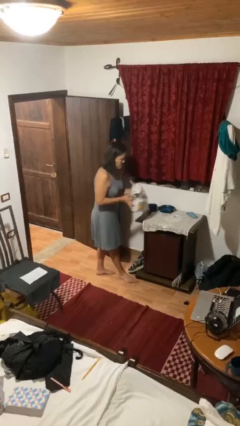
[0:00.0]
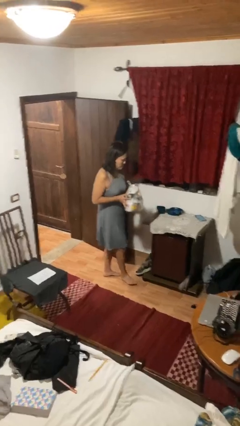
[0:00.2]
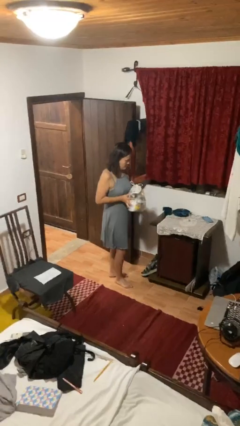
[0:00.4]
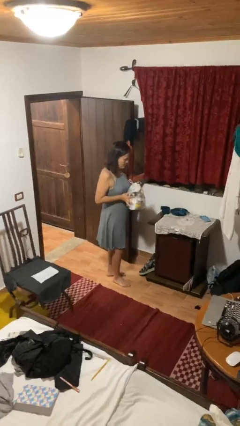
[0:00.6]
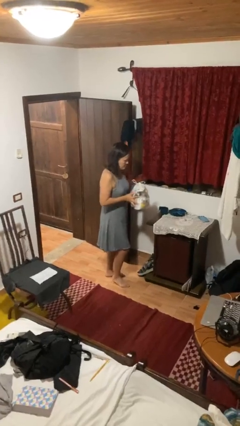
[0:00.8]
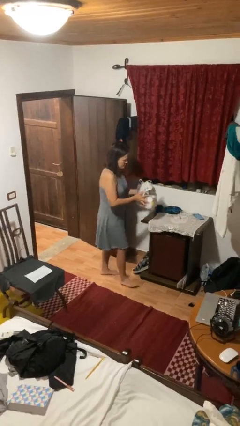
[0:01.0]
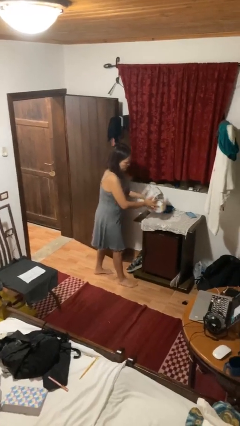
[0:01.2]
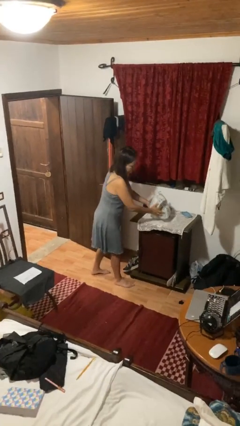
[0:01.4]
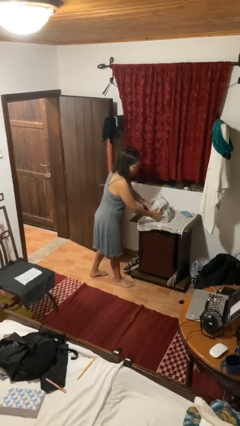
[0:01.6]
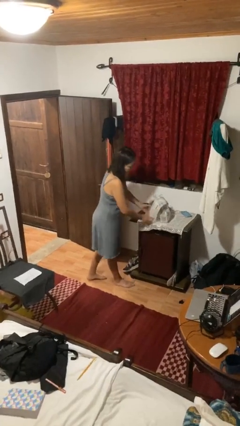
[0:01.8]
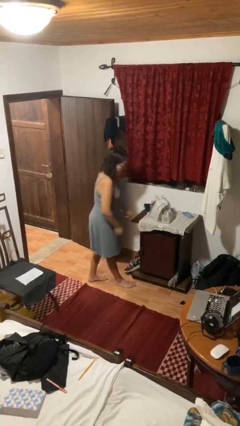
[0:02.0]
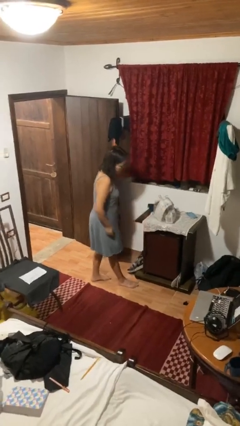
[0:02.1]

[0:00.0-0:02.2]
person puts down object on countertop

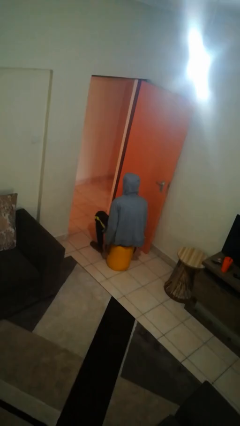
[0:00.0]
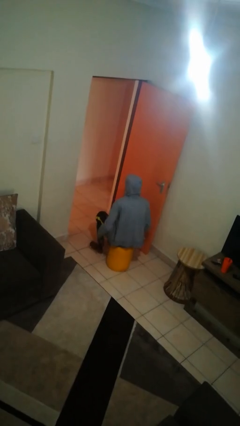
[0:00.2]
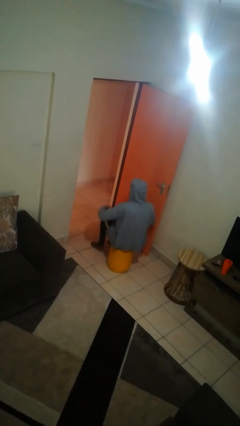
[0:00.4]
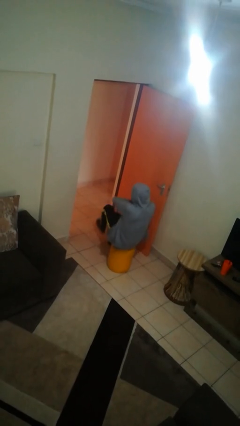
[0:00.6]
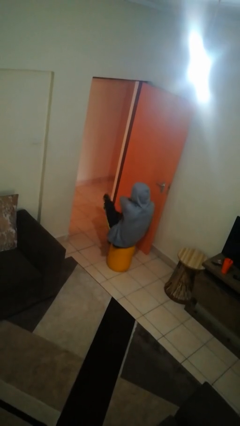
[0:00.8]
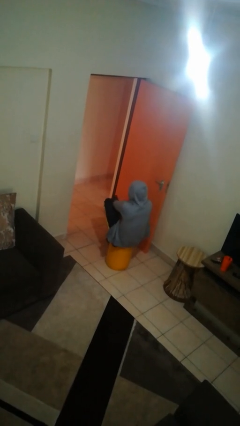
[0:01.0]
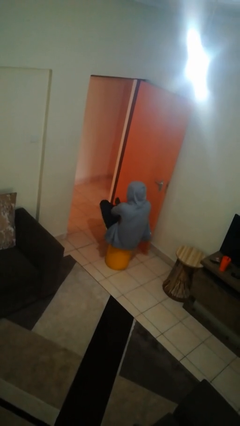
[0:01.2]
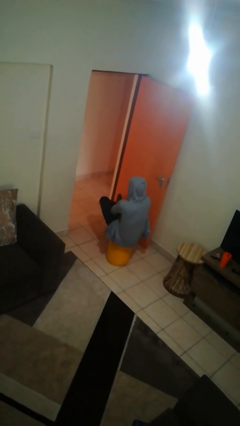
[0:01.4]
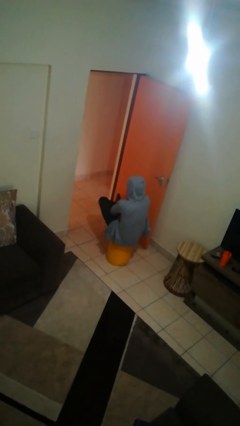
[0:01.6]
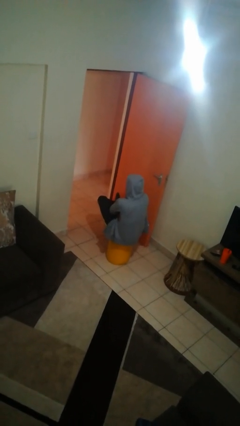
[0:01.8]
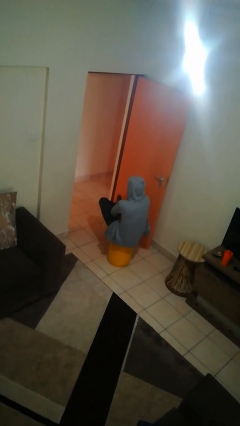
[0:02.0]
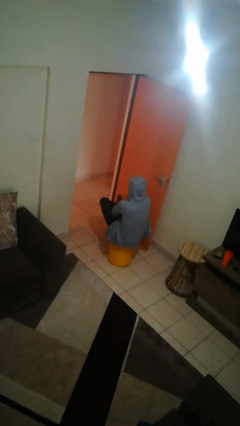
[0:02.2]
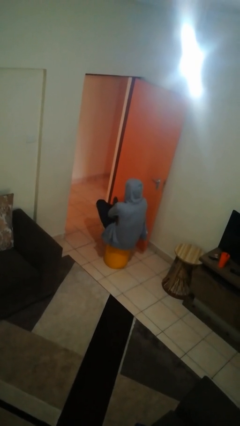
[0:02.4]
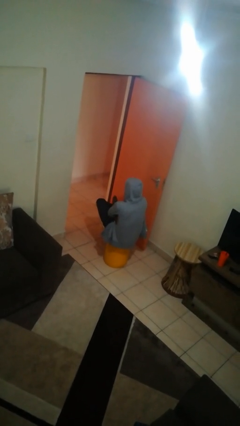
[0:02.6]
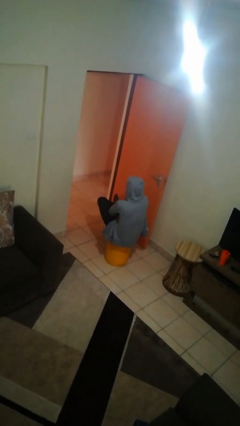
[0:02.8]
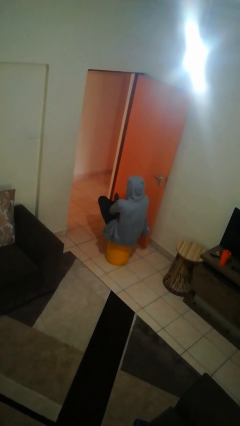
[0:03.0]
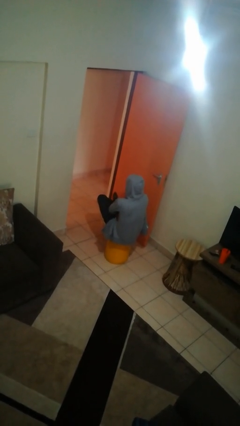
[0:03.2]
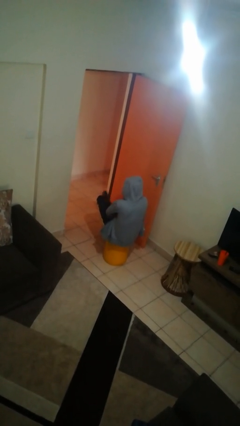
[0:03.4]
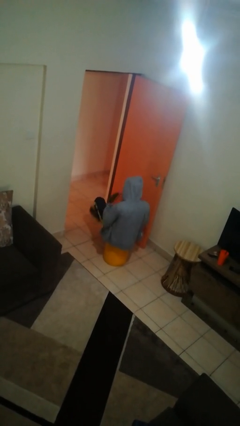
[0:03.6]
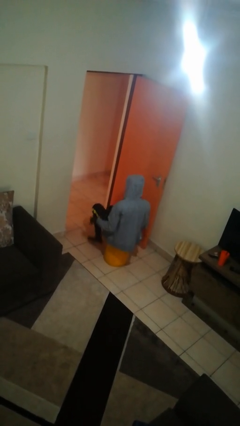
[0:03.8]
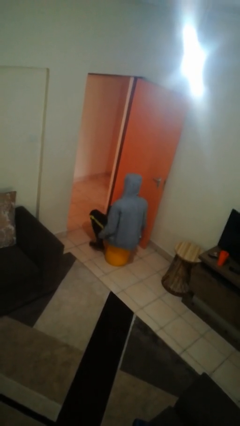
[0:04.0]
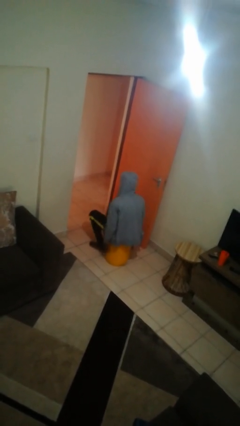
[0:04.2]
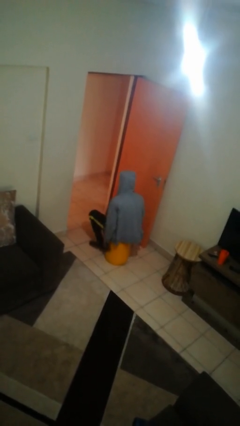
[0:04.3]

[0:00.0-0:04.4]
person crosses arms

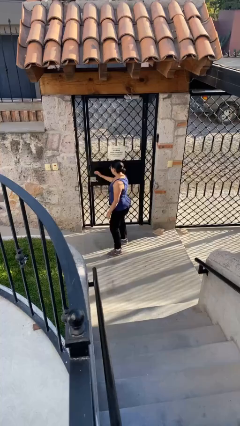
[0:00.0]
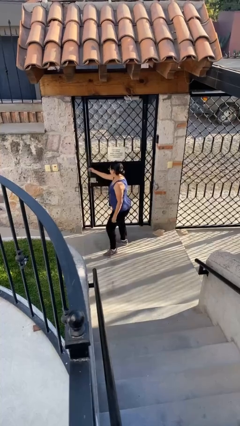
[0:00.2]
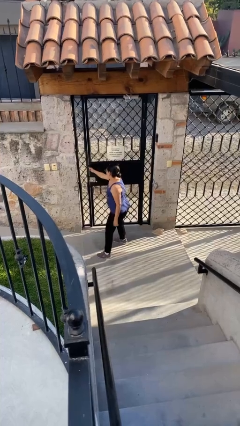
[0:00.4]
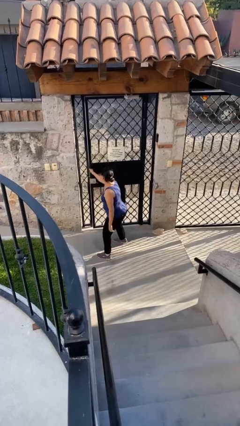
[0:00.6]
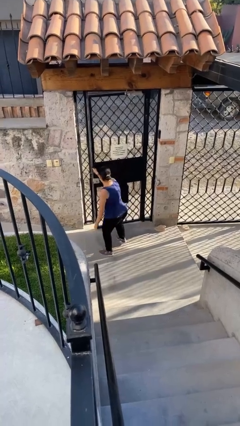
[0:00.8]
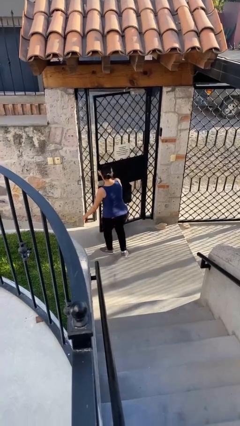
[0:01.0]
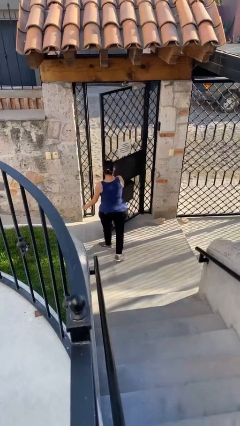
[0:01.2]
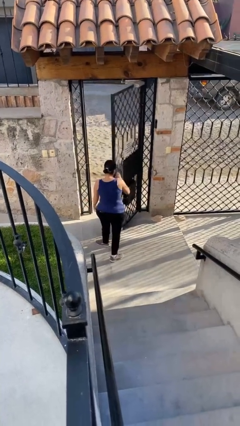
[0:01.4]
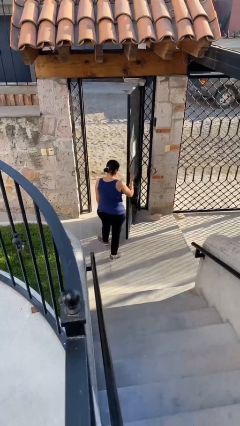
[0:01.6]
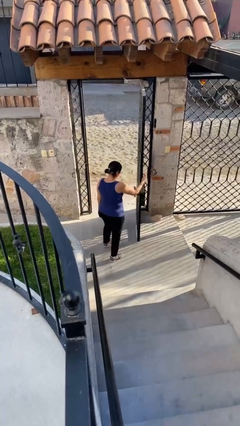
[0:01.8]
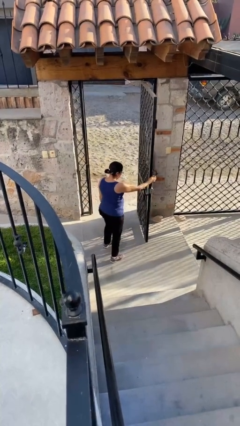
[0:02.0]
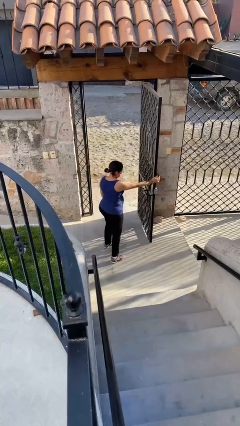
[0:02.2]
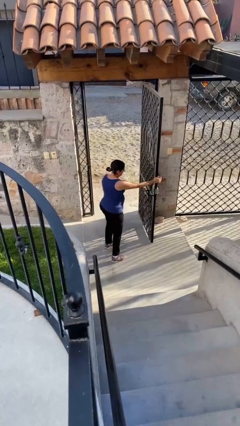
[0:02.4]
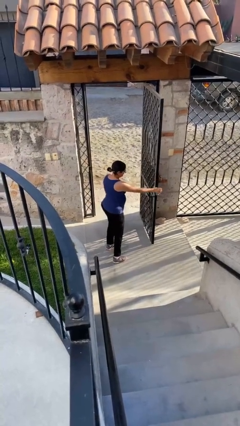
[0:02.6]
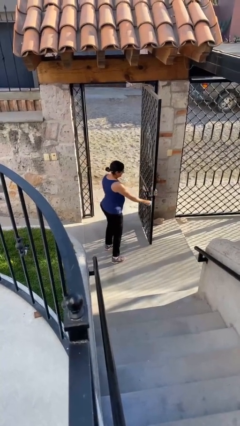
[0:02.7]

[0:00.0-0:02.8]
person opens facility door

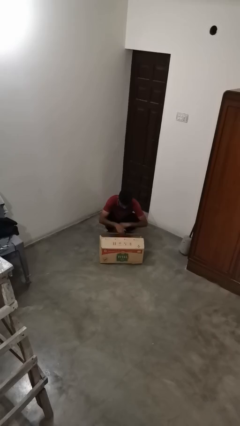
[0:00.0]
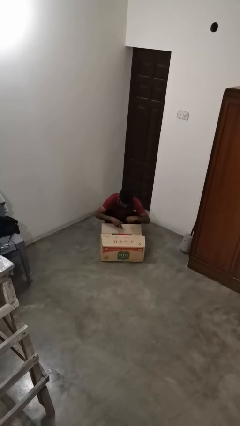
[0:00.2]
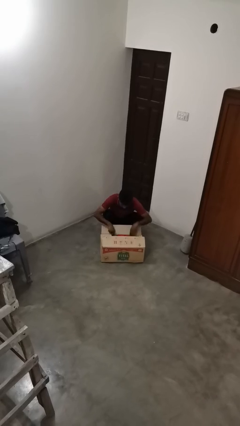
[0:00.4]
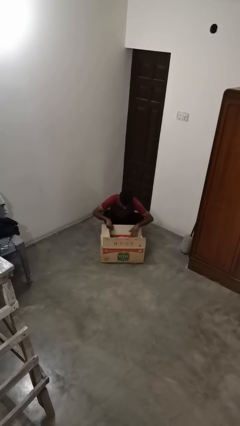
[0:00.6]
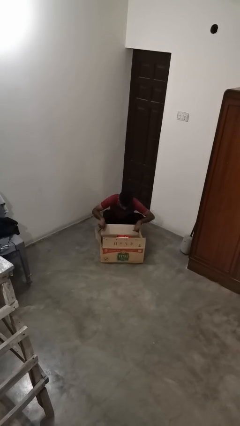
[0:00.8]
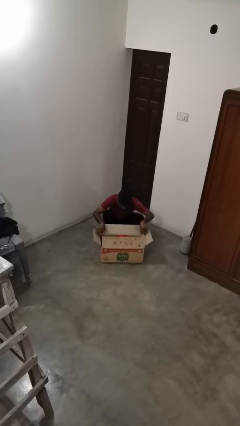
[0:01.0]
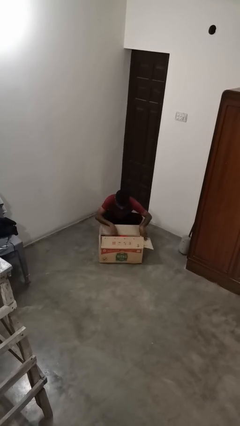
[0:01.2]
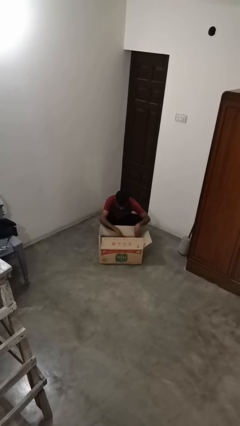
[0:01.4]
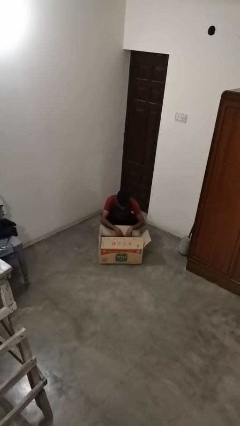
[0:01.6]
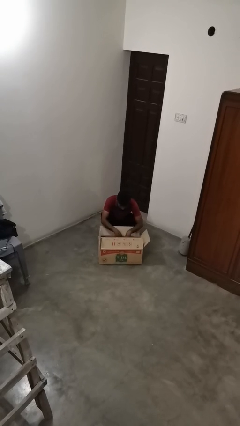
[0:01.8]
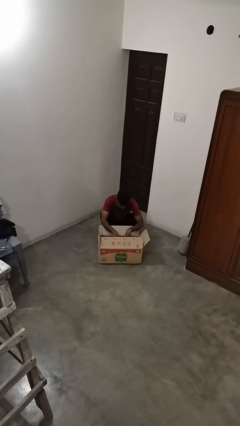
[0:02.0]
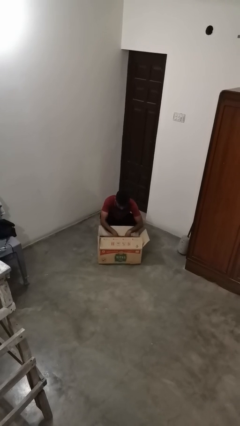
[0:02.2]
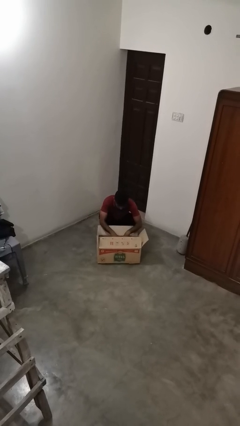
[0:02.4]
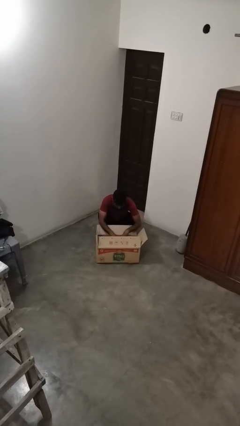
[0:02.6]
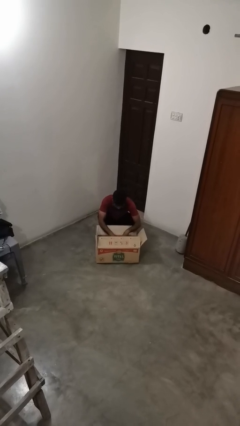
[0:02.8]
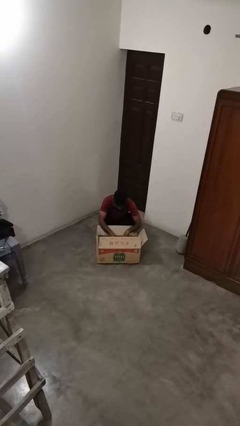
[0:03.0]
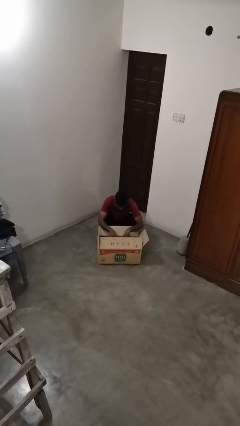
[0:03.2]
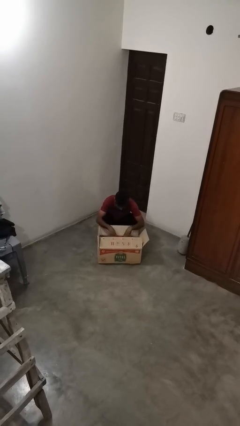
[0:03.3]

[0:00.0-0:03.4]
person searches in box

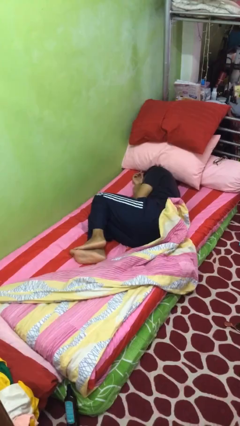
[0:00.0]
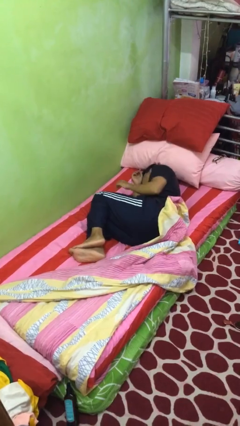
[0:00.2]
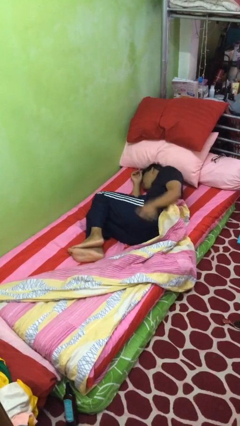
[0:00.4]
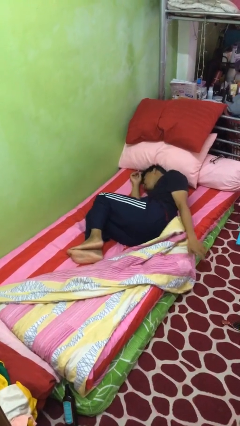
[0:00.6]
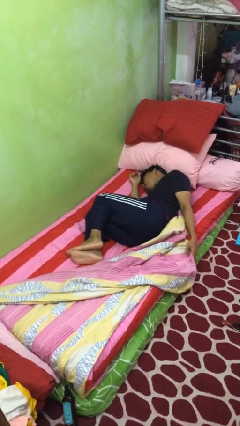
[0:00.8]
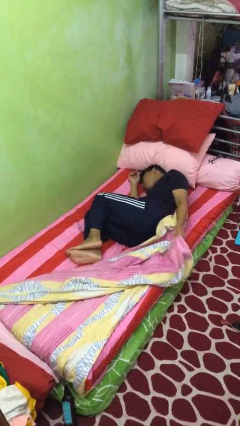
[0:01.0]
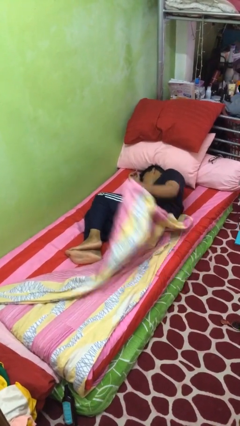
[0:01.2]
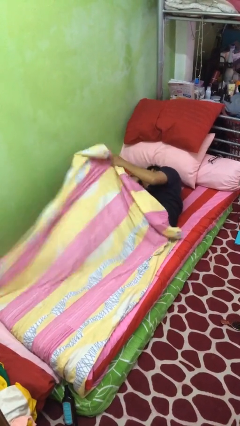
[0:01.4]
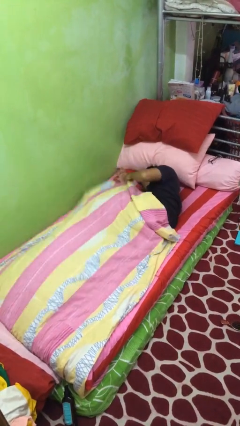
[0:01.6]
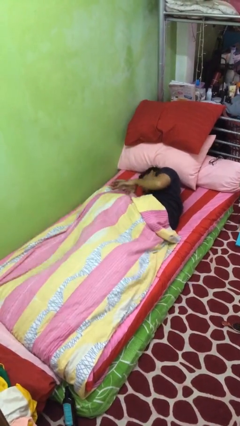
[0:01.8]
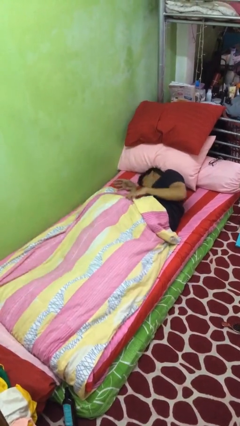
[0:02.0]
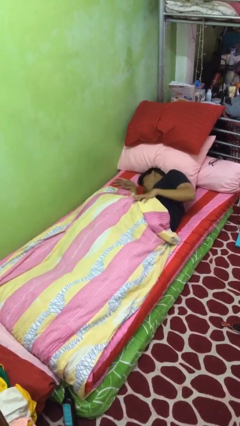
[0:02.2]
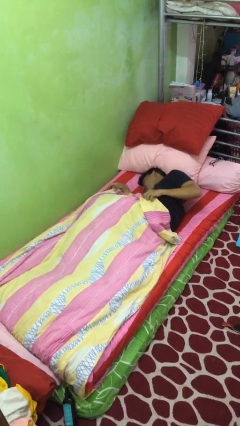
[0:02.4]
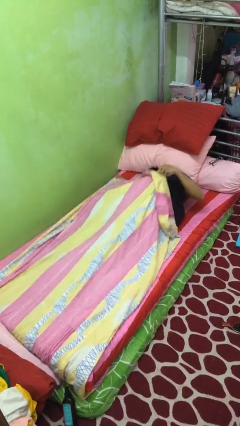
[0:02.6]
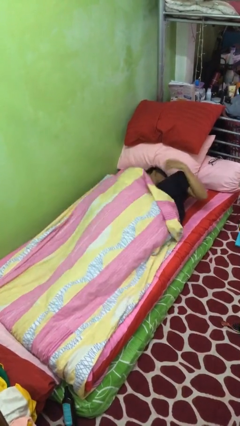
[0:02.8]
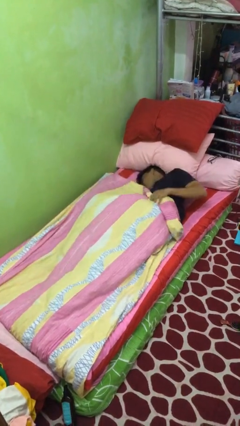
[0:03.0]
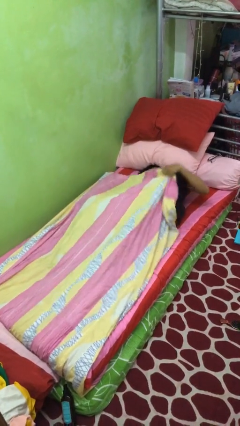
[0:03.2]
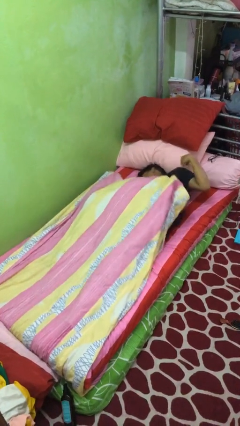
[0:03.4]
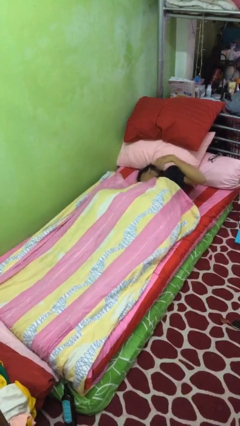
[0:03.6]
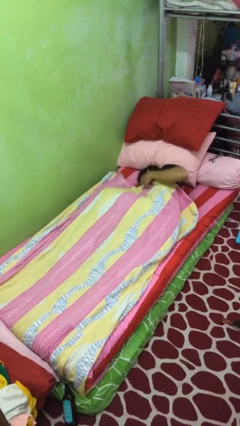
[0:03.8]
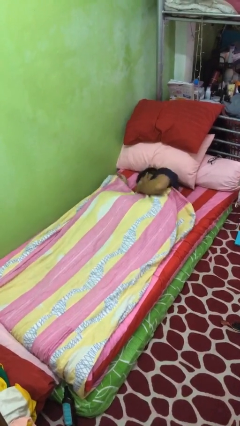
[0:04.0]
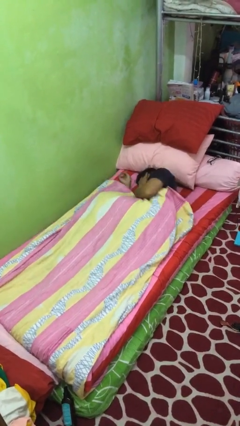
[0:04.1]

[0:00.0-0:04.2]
person covers with bedsheets

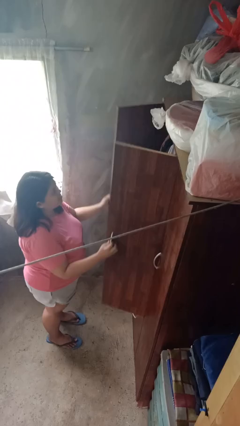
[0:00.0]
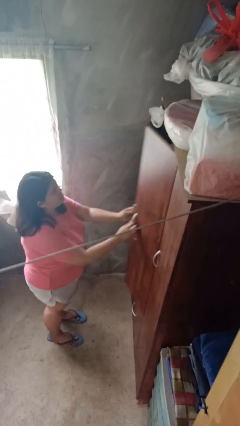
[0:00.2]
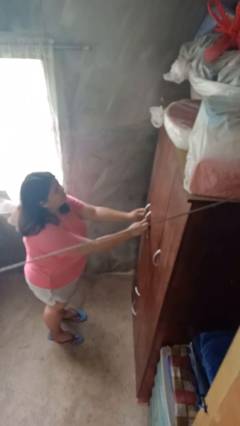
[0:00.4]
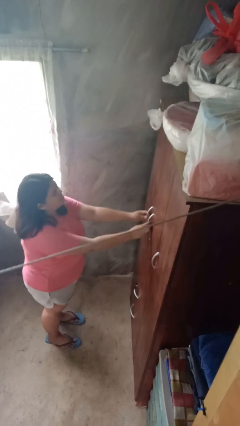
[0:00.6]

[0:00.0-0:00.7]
person closes closet door
